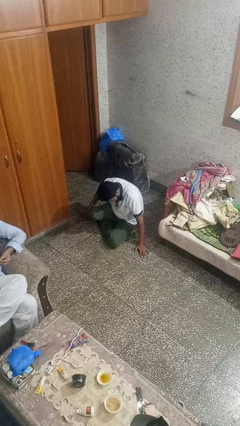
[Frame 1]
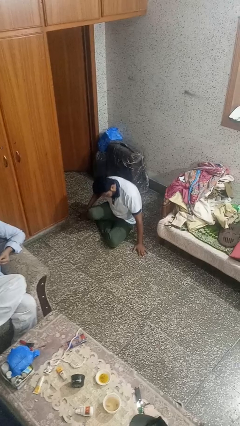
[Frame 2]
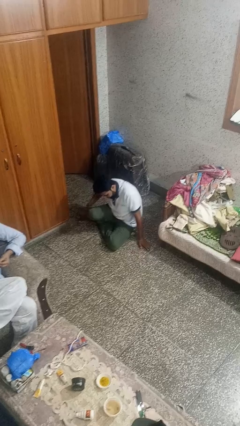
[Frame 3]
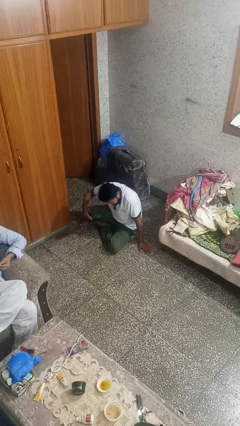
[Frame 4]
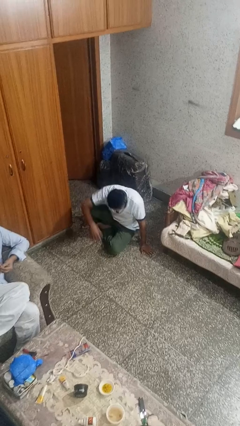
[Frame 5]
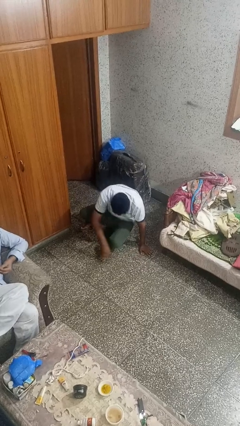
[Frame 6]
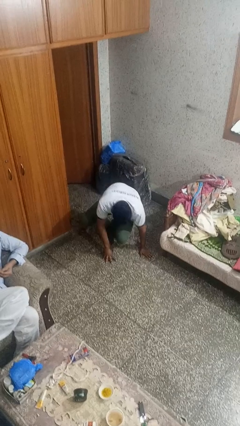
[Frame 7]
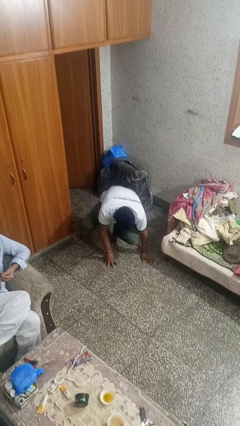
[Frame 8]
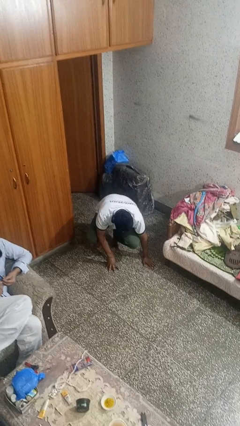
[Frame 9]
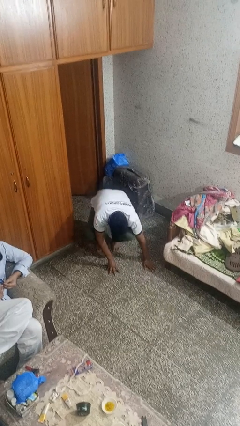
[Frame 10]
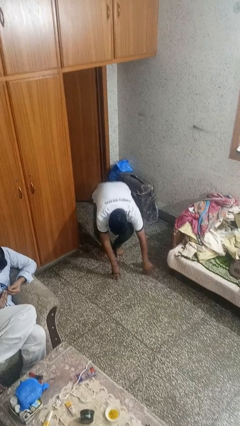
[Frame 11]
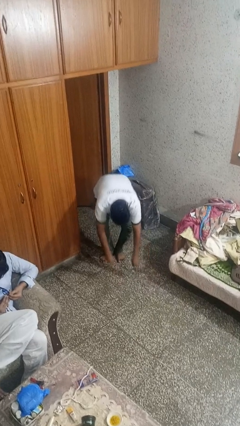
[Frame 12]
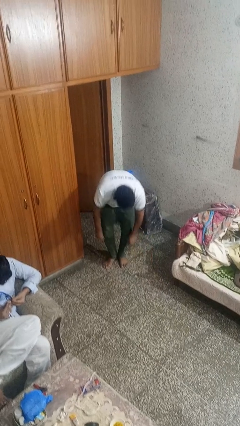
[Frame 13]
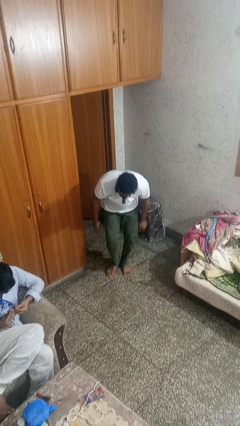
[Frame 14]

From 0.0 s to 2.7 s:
person stands up from floor

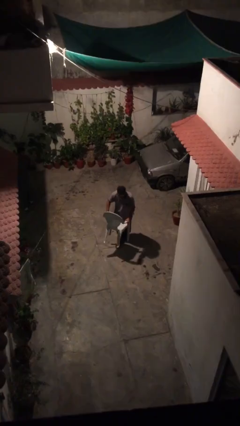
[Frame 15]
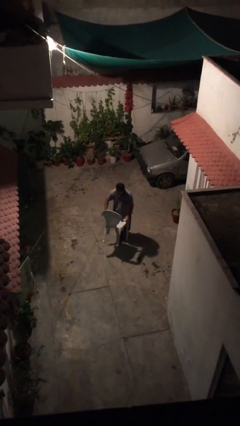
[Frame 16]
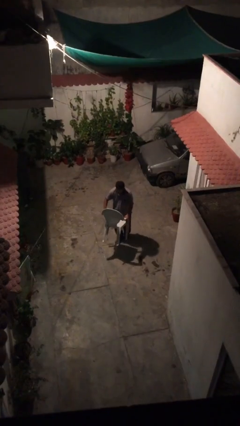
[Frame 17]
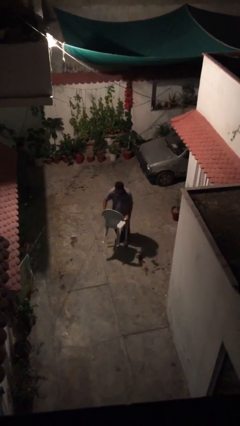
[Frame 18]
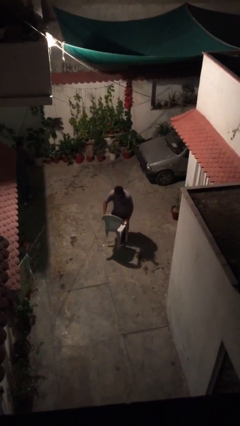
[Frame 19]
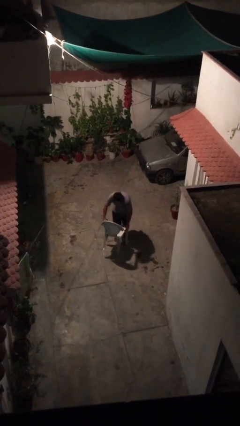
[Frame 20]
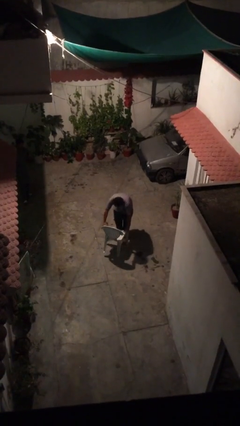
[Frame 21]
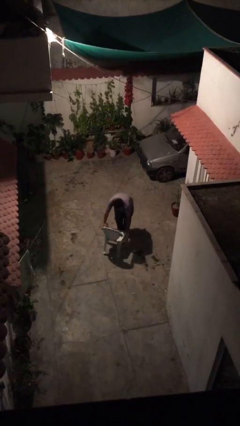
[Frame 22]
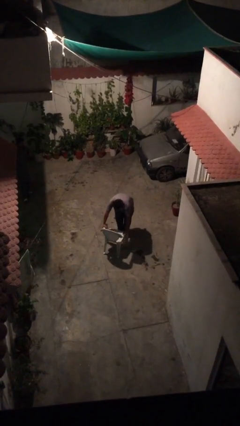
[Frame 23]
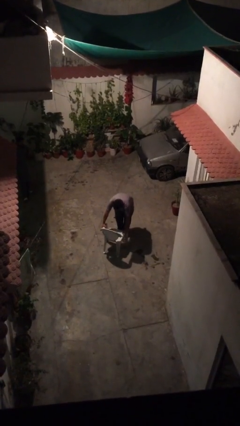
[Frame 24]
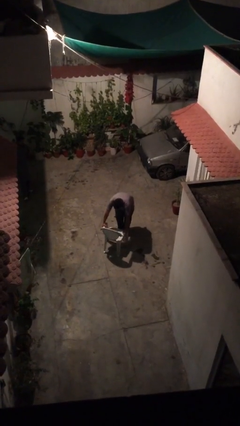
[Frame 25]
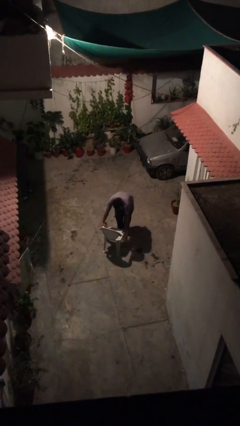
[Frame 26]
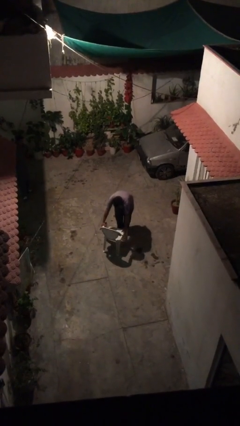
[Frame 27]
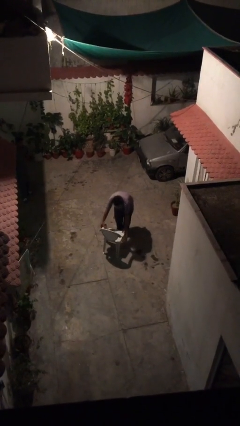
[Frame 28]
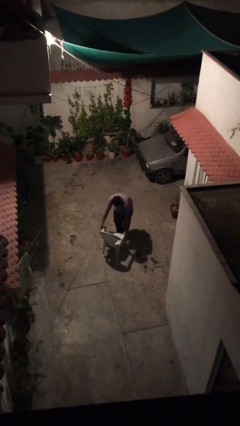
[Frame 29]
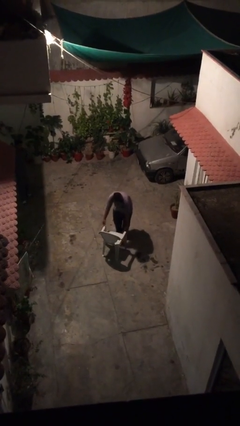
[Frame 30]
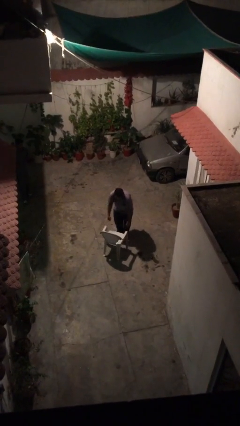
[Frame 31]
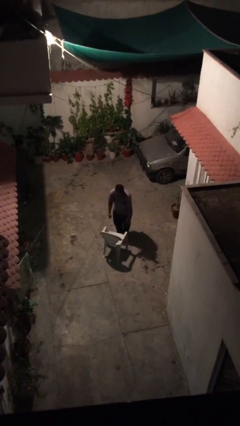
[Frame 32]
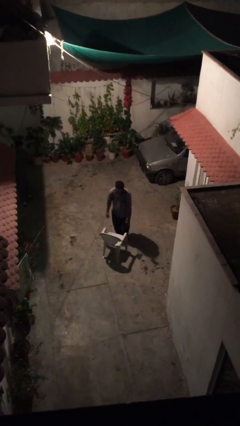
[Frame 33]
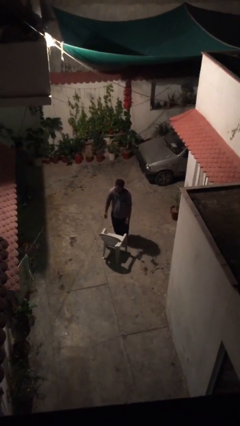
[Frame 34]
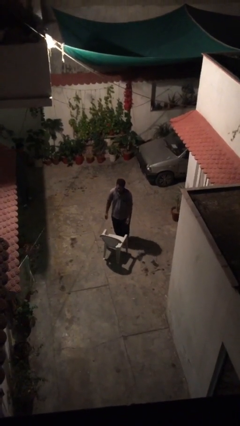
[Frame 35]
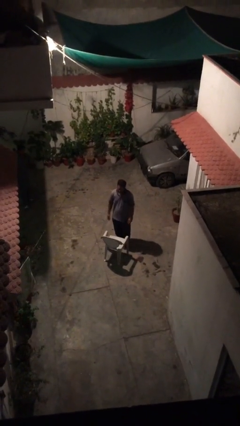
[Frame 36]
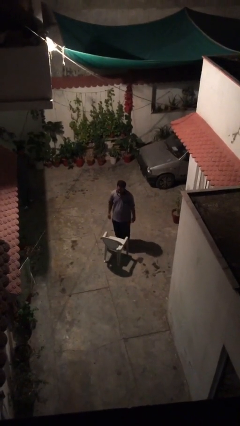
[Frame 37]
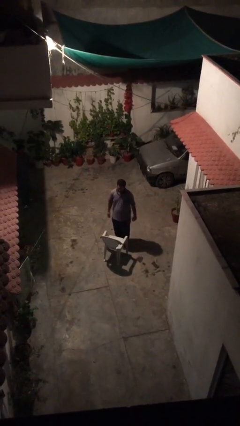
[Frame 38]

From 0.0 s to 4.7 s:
person puts down object on floor

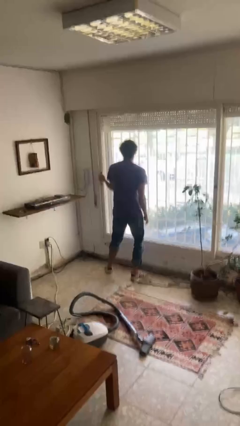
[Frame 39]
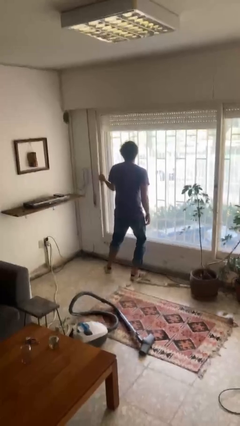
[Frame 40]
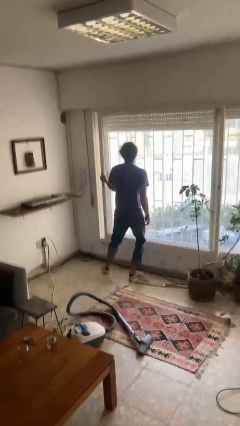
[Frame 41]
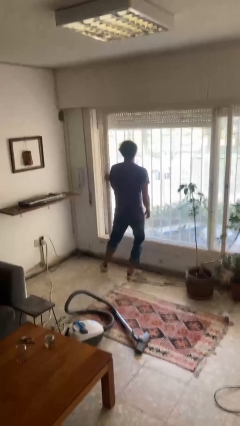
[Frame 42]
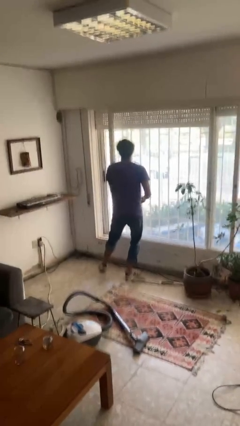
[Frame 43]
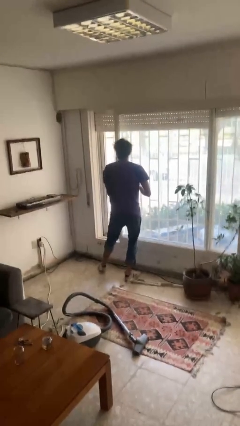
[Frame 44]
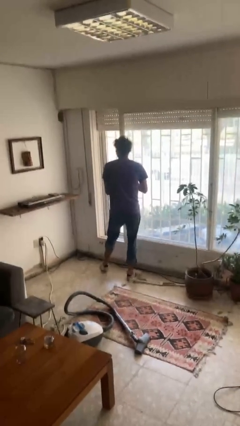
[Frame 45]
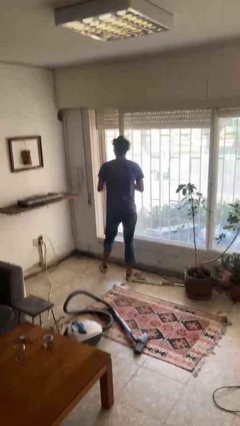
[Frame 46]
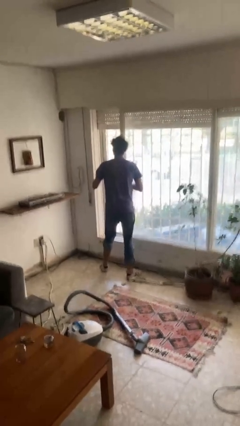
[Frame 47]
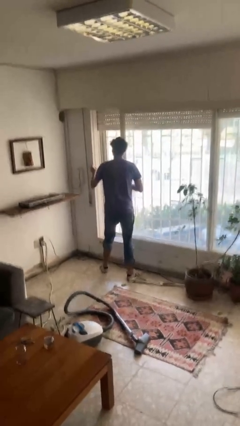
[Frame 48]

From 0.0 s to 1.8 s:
person opens sliding door

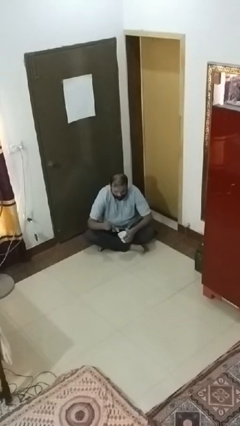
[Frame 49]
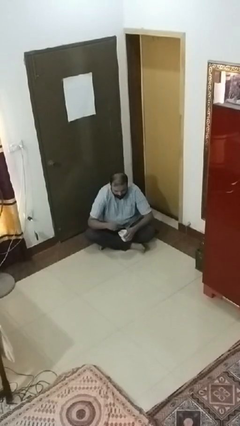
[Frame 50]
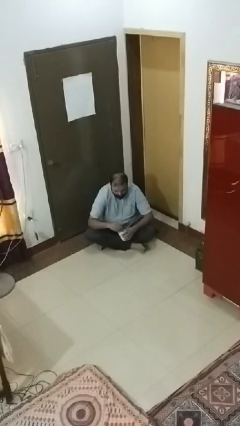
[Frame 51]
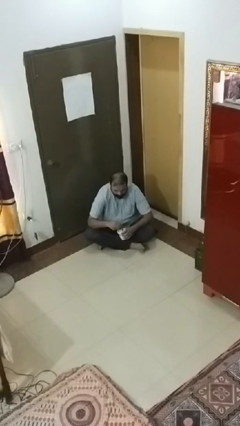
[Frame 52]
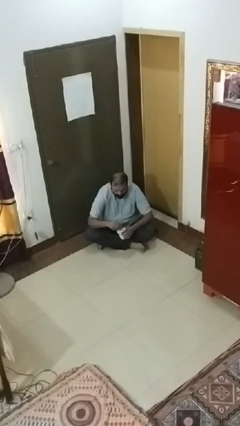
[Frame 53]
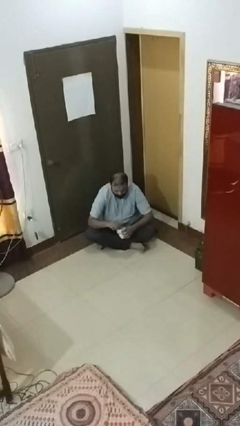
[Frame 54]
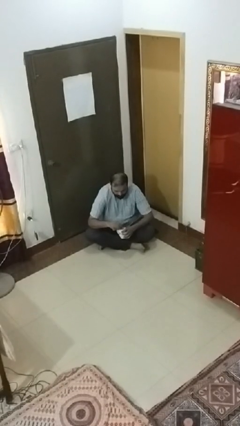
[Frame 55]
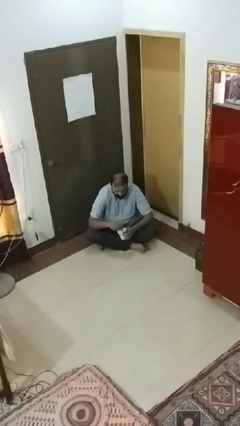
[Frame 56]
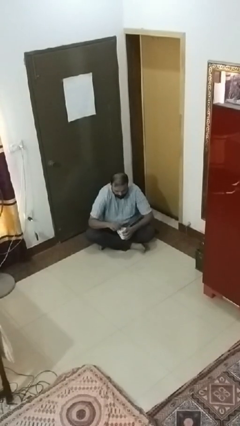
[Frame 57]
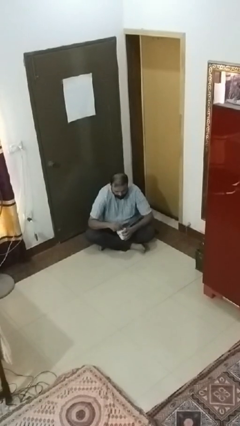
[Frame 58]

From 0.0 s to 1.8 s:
person stirs mug

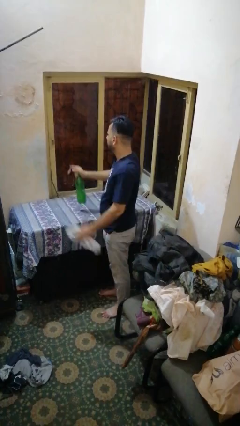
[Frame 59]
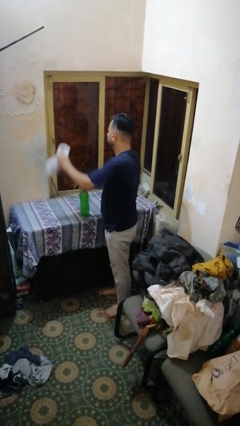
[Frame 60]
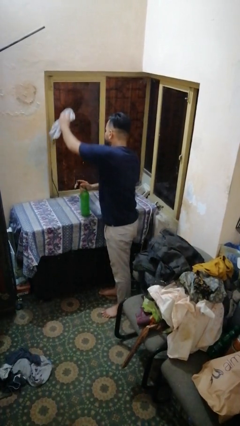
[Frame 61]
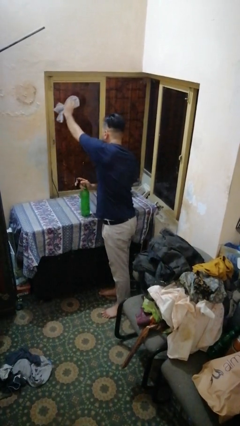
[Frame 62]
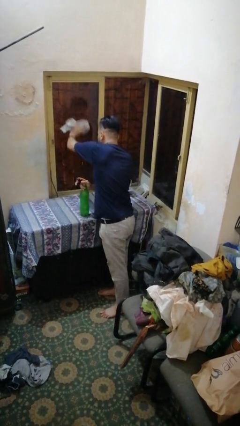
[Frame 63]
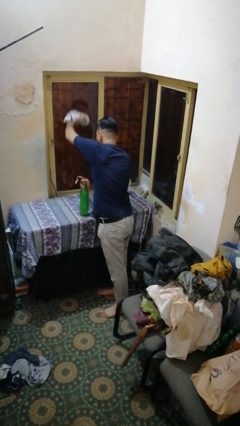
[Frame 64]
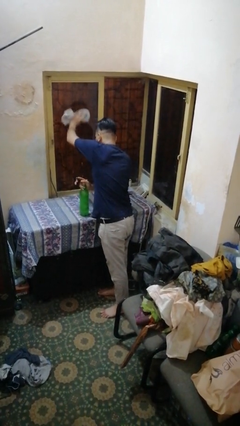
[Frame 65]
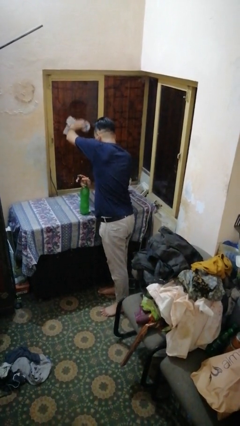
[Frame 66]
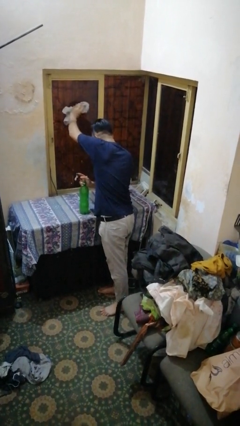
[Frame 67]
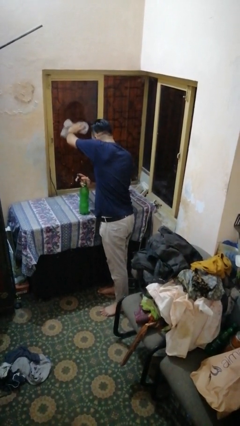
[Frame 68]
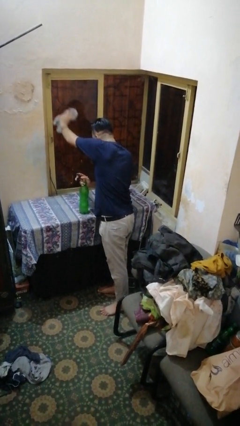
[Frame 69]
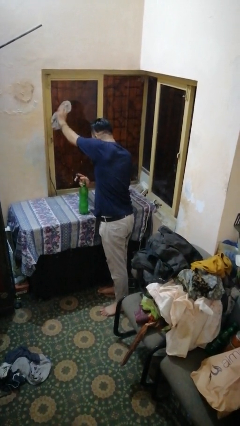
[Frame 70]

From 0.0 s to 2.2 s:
person washes window

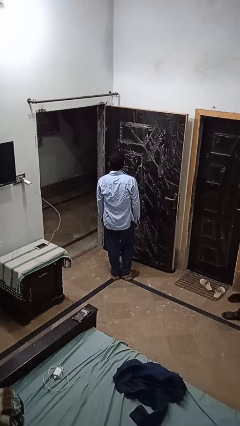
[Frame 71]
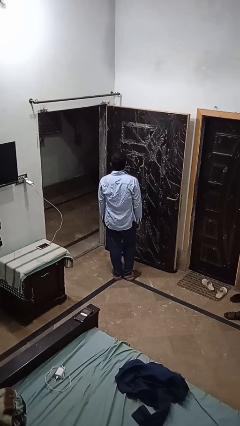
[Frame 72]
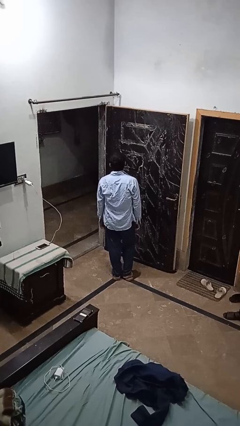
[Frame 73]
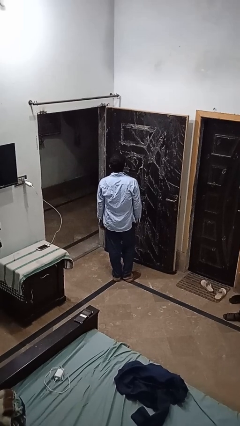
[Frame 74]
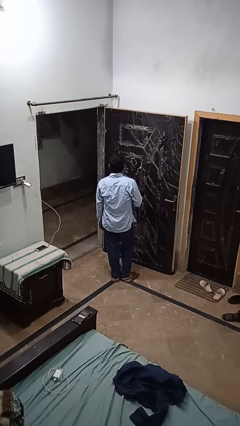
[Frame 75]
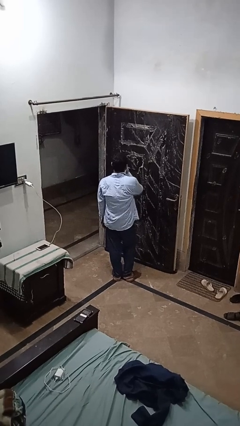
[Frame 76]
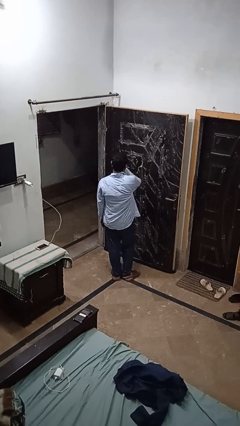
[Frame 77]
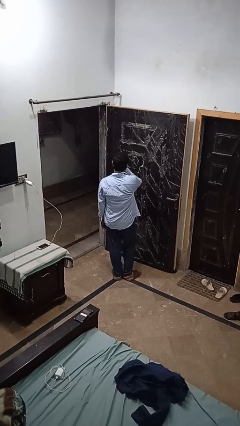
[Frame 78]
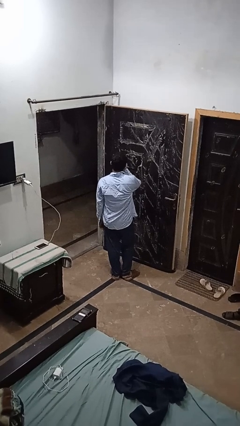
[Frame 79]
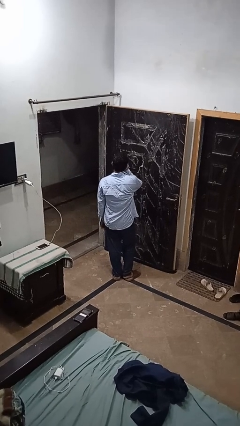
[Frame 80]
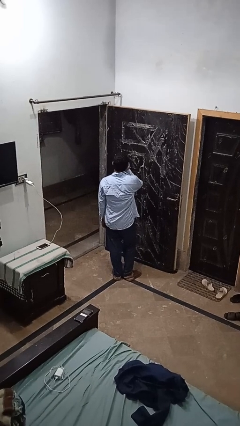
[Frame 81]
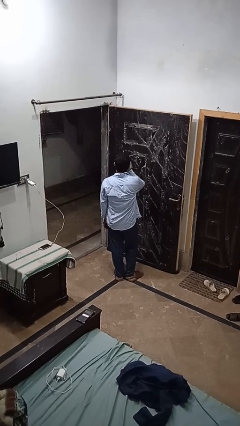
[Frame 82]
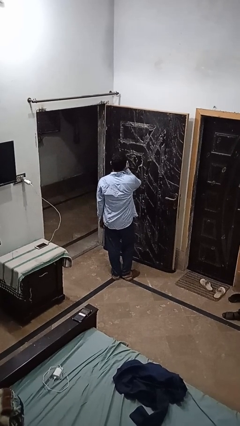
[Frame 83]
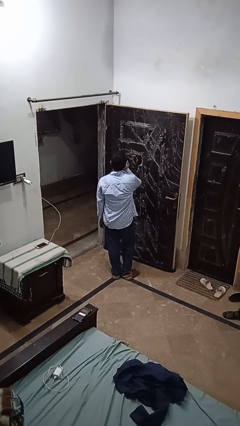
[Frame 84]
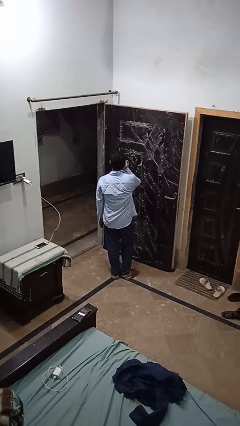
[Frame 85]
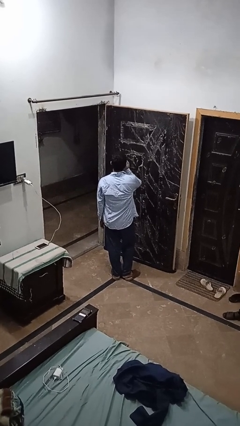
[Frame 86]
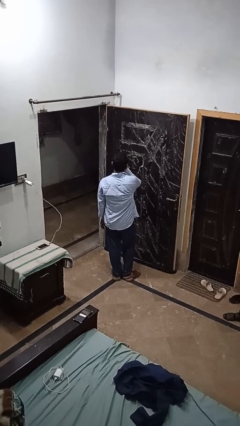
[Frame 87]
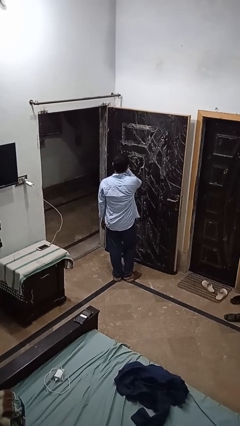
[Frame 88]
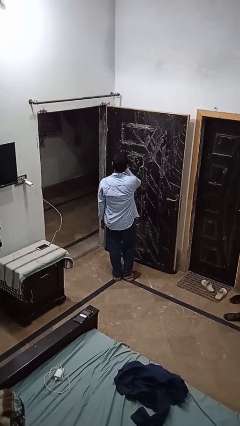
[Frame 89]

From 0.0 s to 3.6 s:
person licks fingers

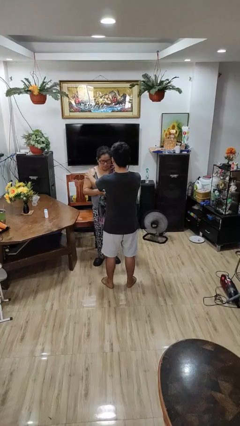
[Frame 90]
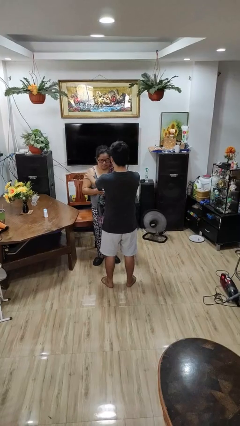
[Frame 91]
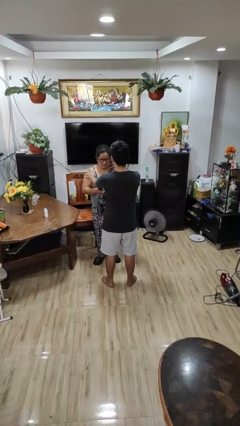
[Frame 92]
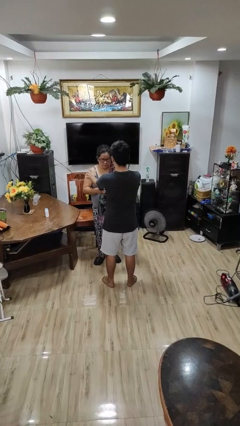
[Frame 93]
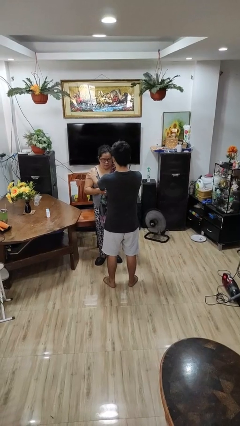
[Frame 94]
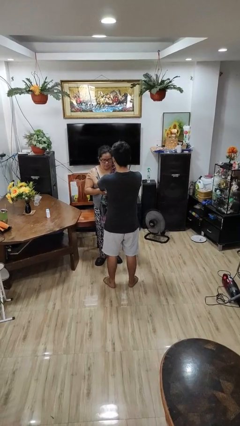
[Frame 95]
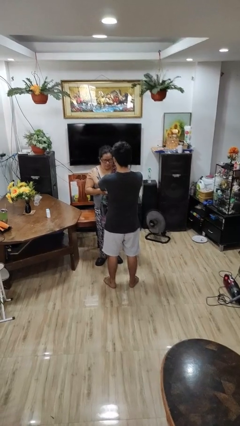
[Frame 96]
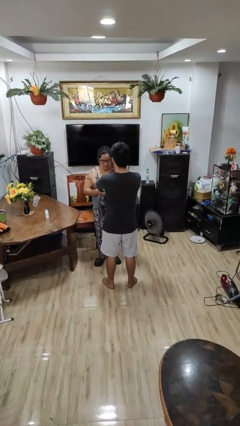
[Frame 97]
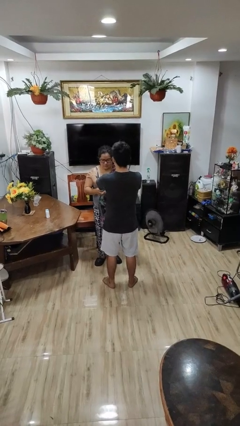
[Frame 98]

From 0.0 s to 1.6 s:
person grabs person by shoulder
